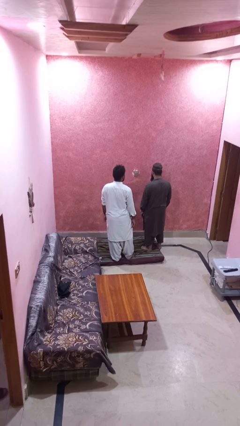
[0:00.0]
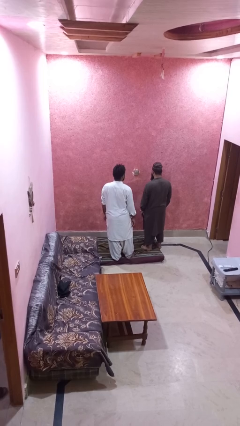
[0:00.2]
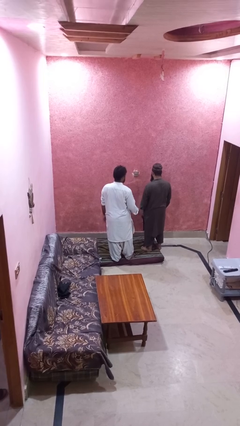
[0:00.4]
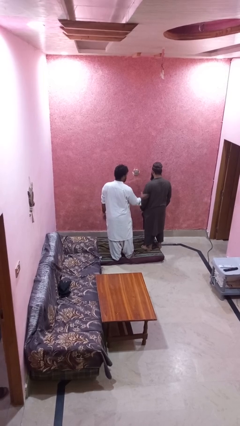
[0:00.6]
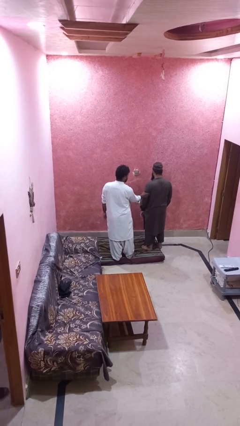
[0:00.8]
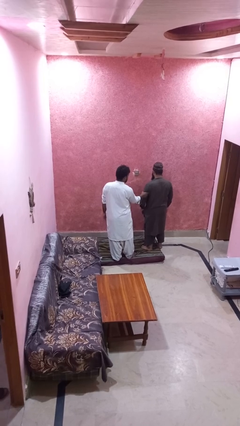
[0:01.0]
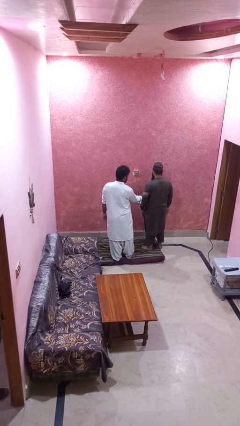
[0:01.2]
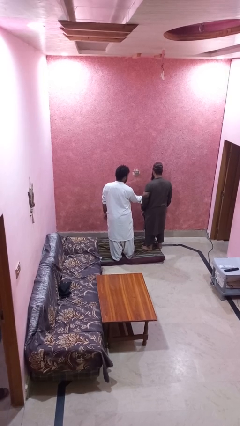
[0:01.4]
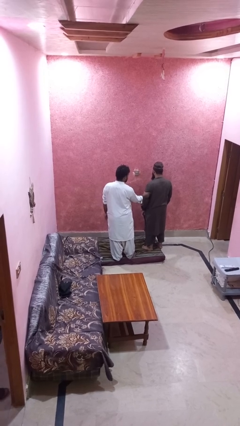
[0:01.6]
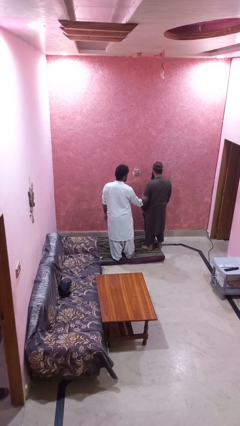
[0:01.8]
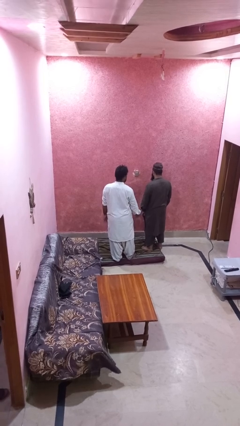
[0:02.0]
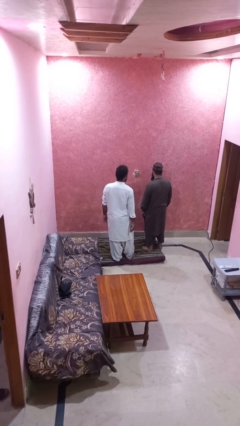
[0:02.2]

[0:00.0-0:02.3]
person grabs person by bicep

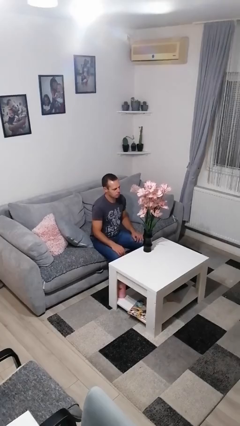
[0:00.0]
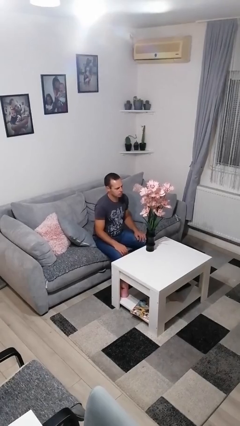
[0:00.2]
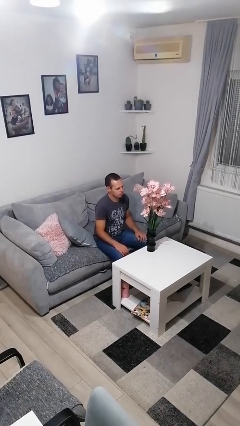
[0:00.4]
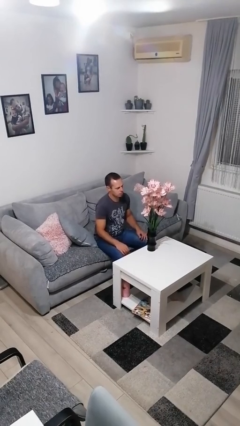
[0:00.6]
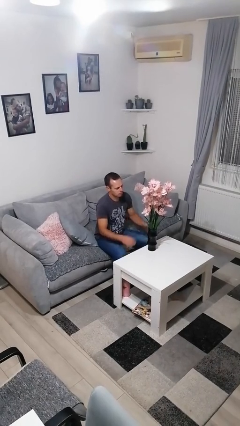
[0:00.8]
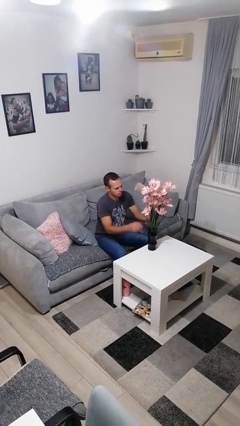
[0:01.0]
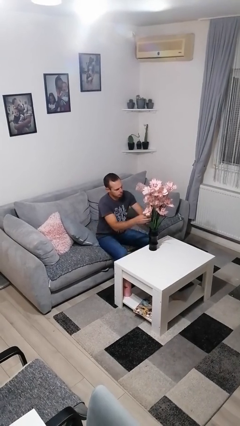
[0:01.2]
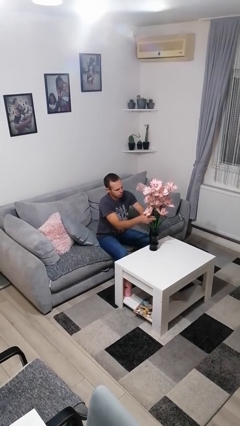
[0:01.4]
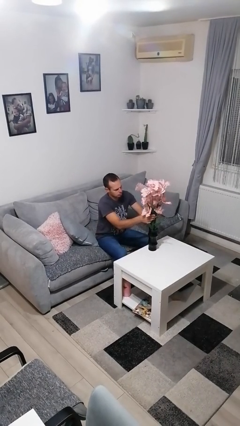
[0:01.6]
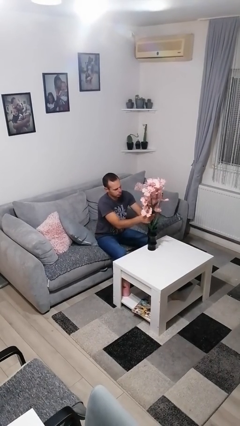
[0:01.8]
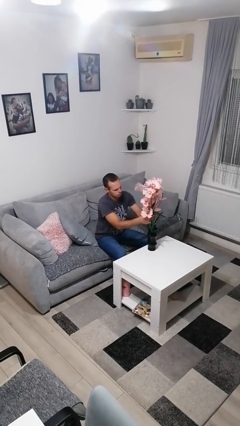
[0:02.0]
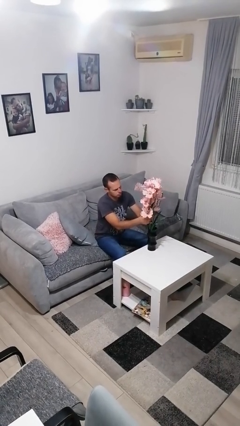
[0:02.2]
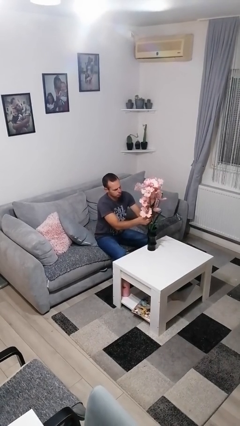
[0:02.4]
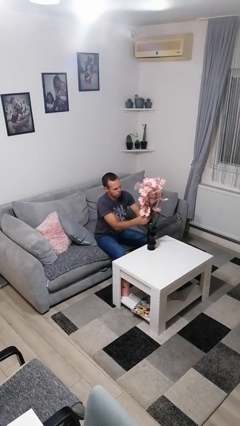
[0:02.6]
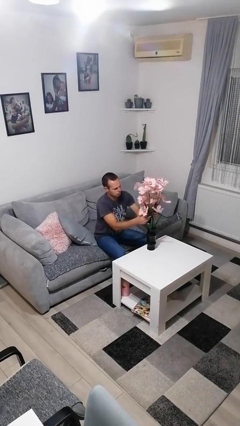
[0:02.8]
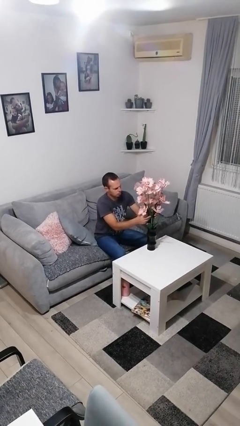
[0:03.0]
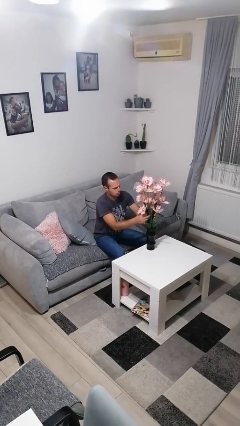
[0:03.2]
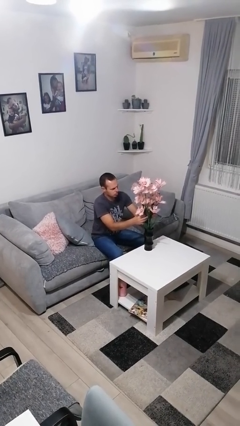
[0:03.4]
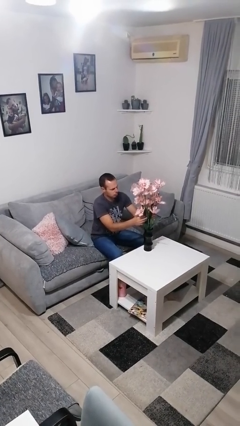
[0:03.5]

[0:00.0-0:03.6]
person arranges flowers in vase

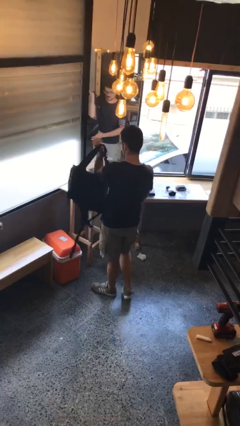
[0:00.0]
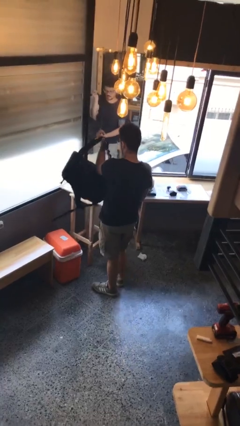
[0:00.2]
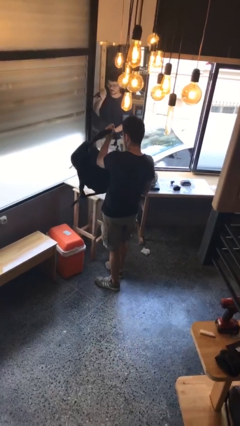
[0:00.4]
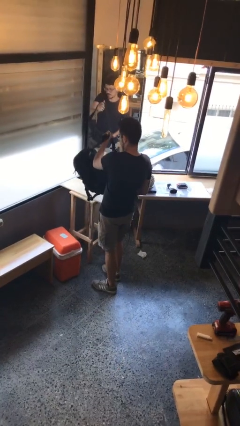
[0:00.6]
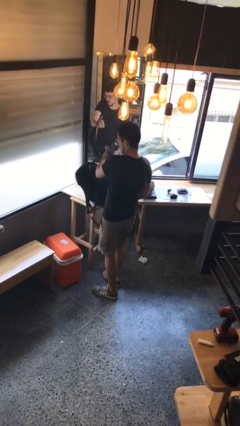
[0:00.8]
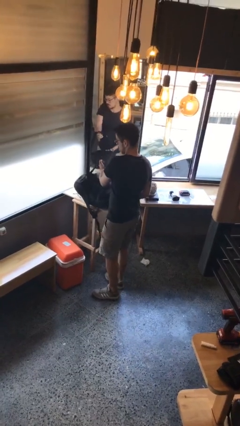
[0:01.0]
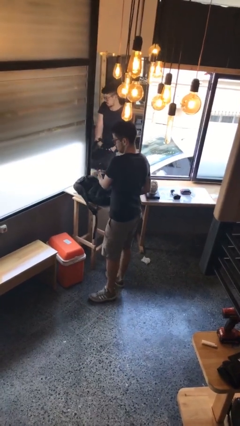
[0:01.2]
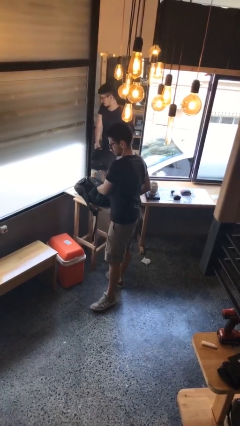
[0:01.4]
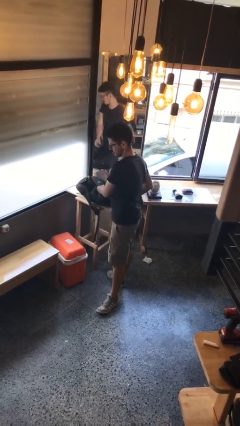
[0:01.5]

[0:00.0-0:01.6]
person puts down object on table

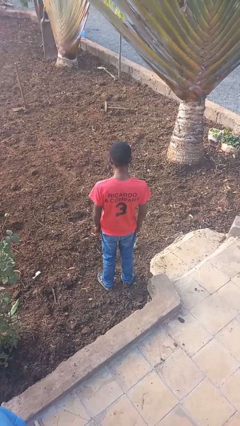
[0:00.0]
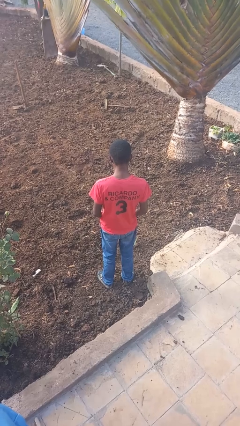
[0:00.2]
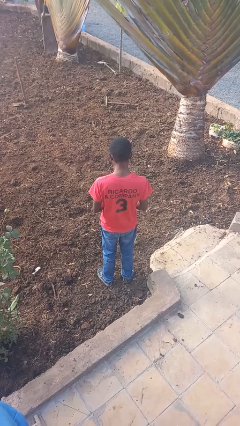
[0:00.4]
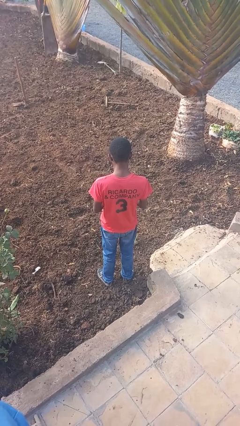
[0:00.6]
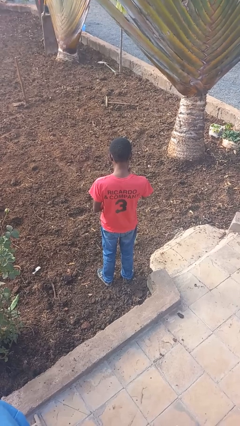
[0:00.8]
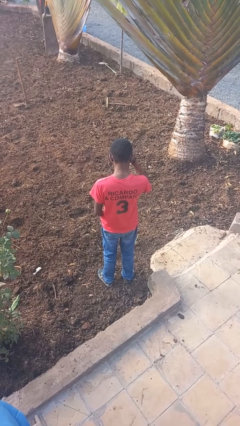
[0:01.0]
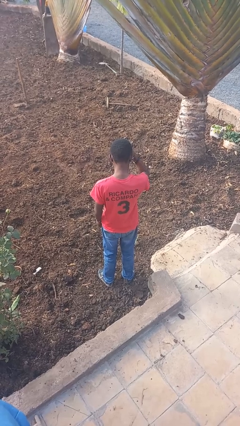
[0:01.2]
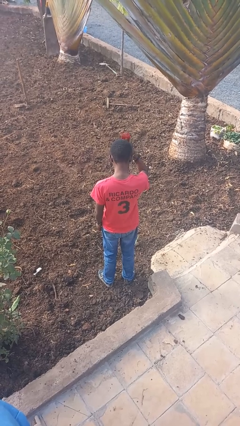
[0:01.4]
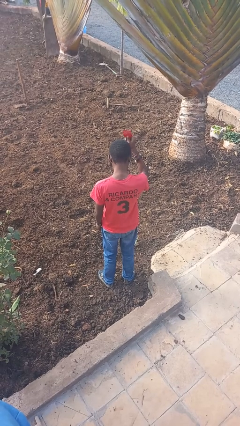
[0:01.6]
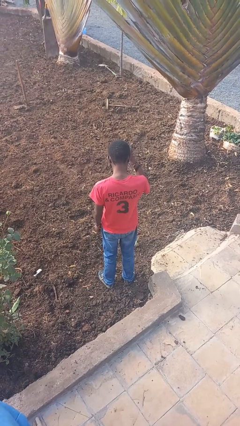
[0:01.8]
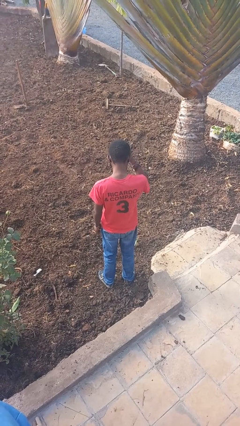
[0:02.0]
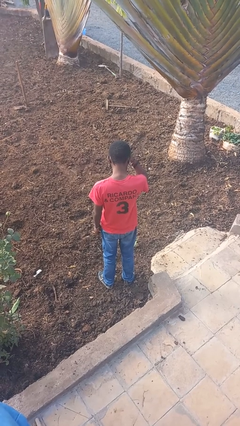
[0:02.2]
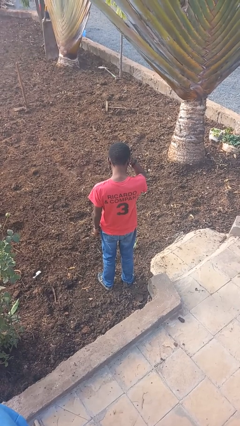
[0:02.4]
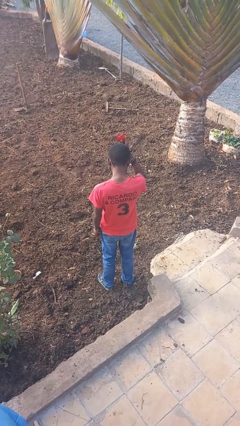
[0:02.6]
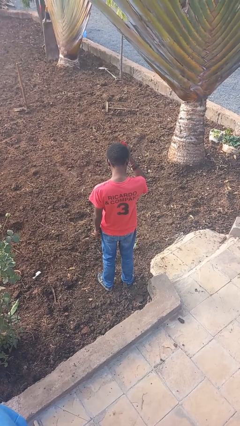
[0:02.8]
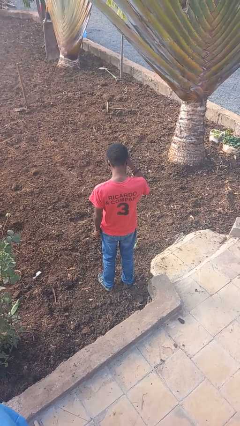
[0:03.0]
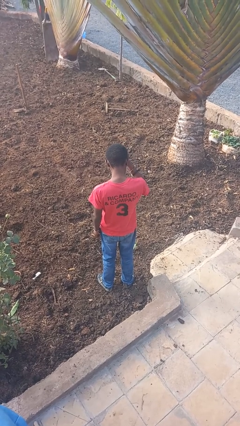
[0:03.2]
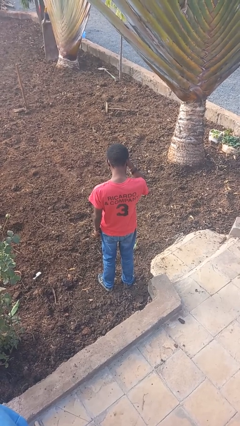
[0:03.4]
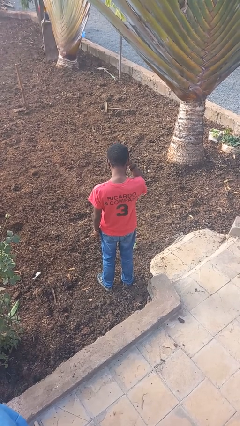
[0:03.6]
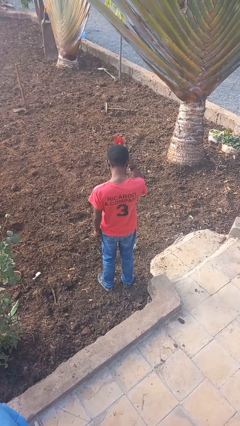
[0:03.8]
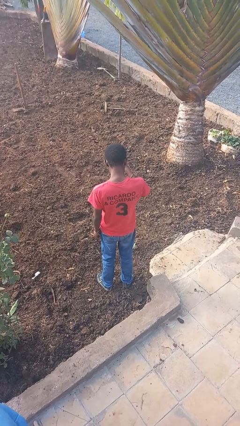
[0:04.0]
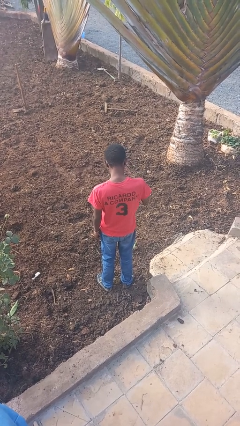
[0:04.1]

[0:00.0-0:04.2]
person brushes hair

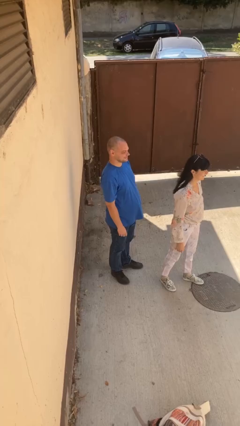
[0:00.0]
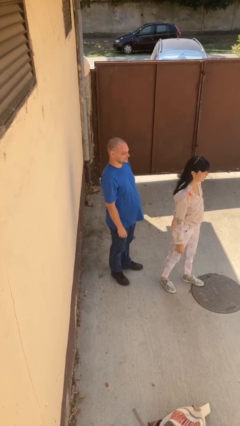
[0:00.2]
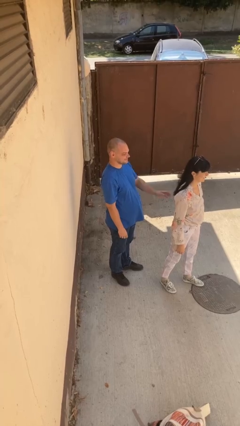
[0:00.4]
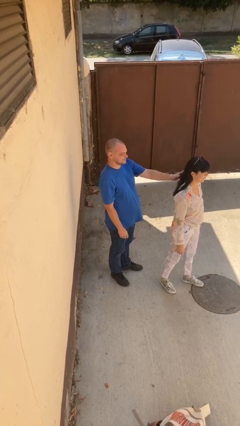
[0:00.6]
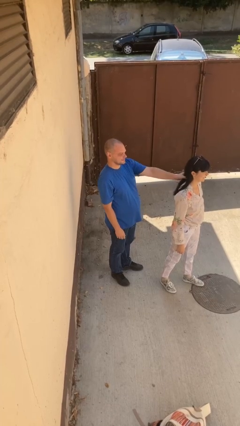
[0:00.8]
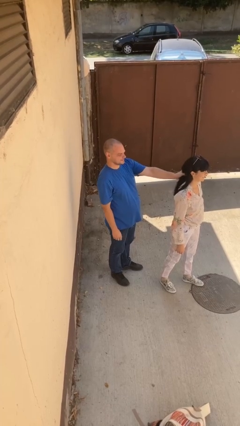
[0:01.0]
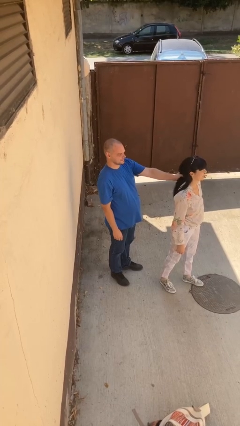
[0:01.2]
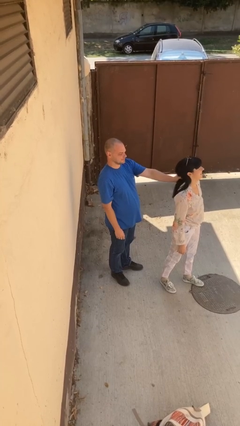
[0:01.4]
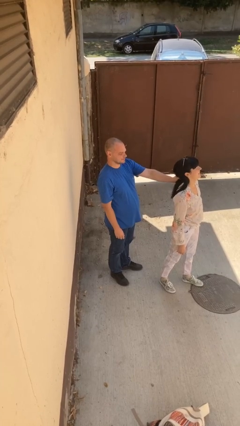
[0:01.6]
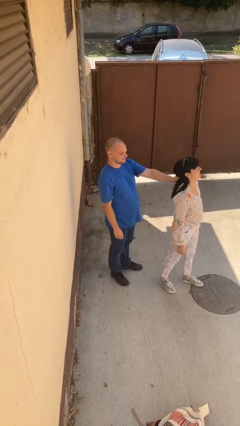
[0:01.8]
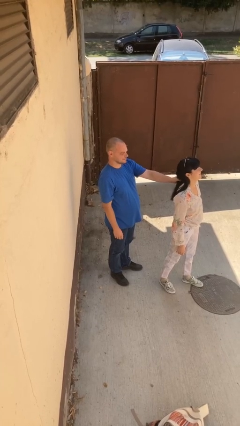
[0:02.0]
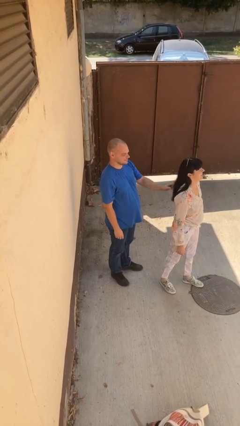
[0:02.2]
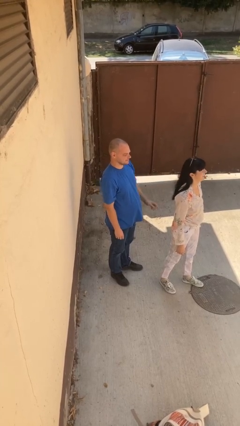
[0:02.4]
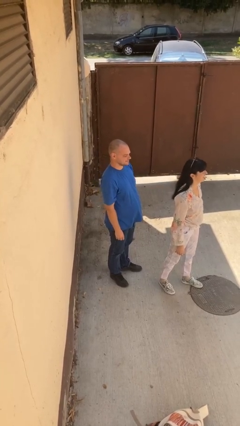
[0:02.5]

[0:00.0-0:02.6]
person grabs person by hair

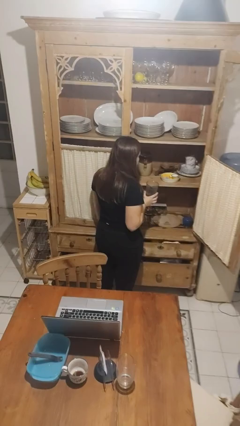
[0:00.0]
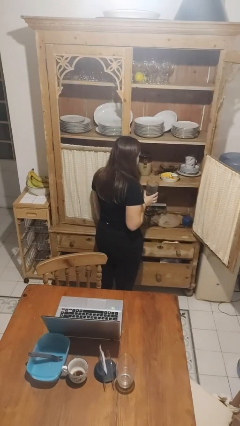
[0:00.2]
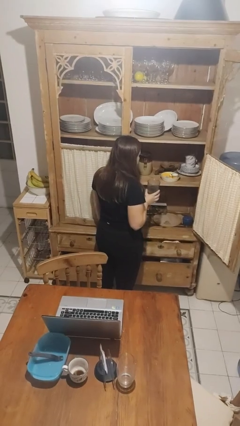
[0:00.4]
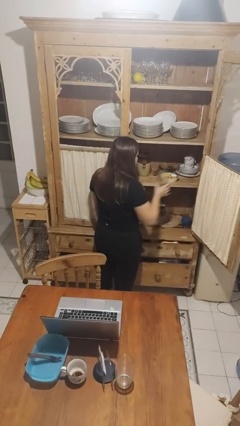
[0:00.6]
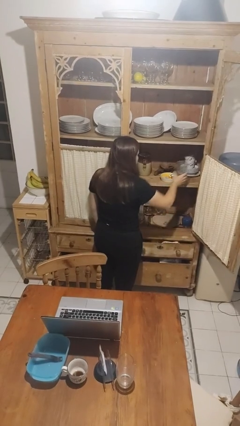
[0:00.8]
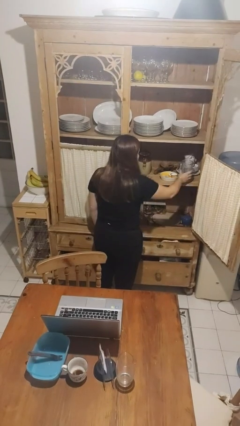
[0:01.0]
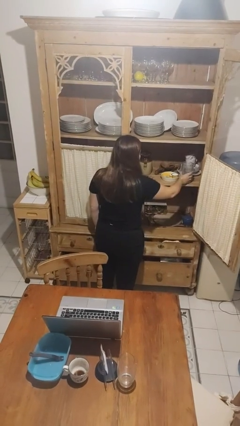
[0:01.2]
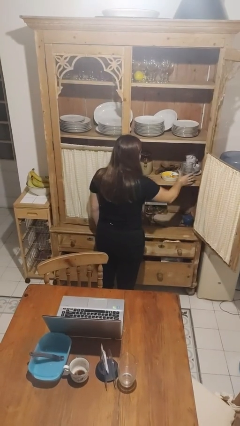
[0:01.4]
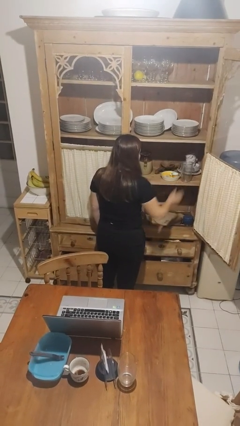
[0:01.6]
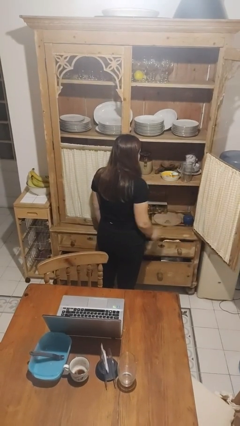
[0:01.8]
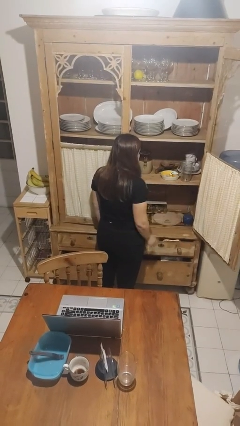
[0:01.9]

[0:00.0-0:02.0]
person puts object in cabinet

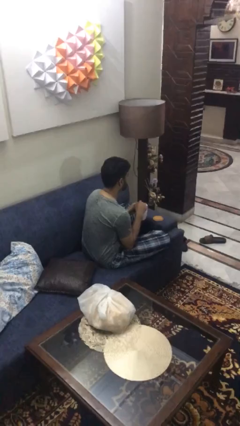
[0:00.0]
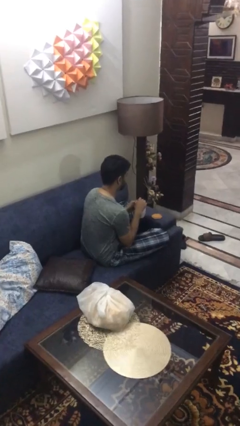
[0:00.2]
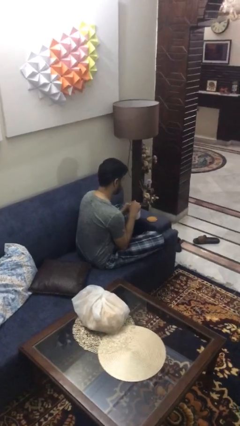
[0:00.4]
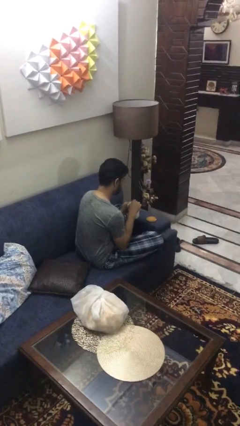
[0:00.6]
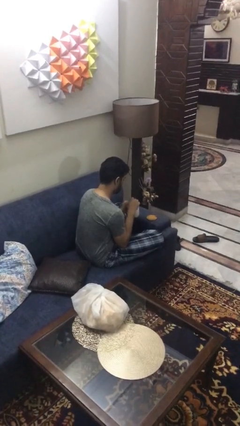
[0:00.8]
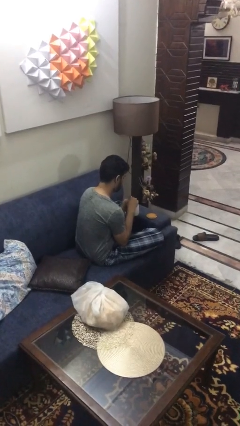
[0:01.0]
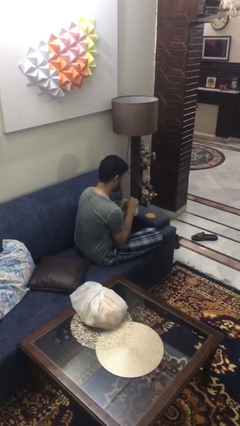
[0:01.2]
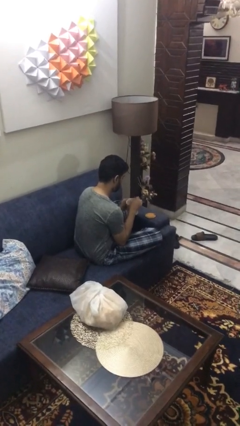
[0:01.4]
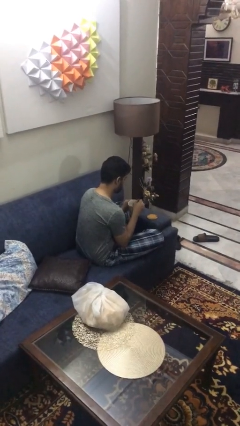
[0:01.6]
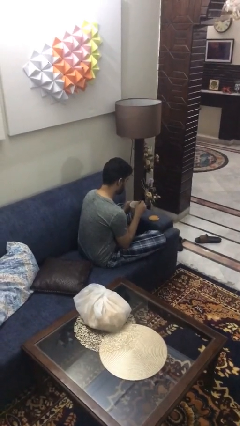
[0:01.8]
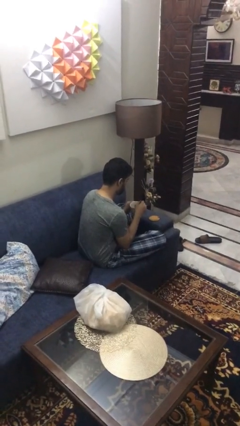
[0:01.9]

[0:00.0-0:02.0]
person stirs mug
